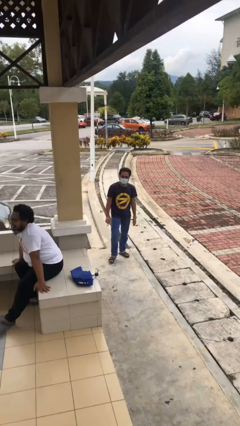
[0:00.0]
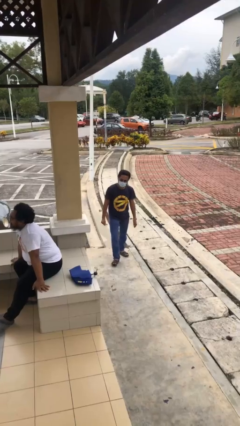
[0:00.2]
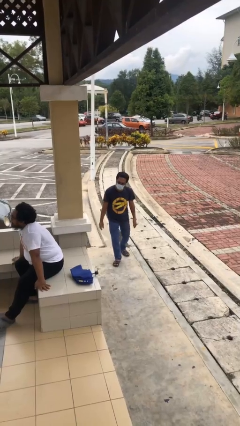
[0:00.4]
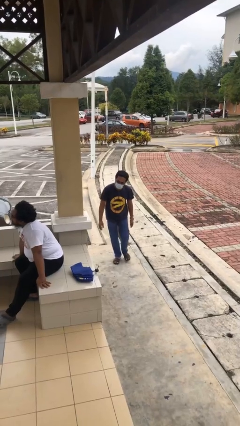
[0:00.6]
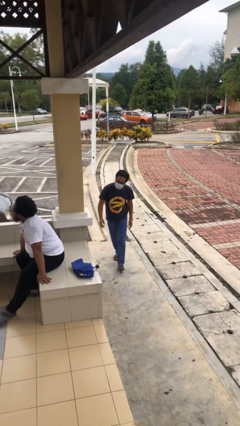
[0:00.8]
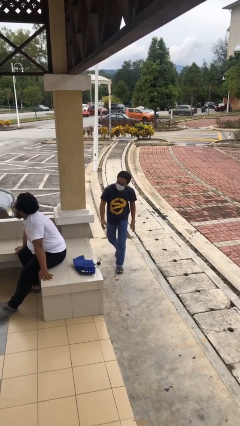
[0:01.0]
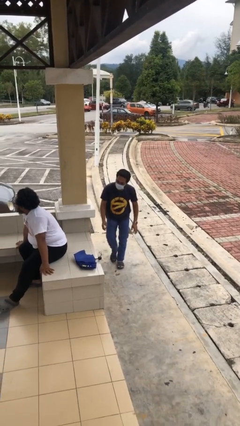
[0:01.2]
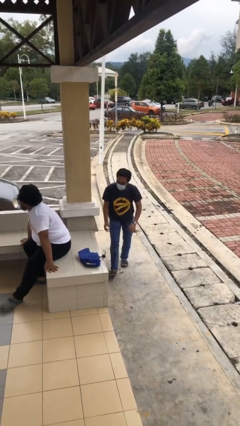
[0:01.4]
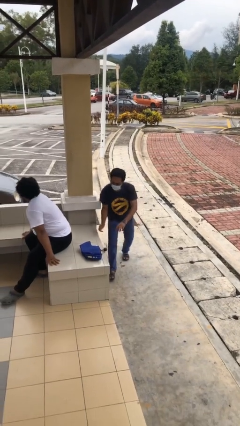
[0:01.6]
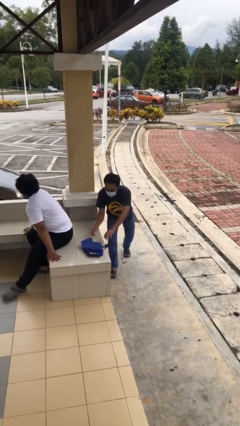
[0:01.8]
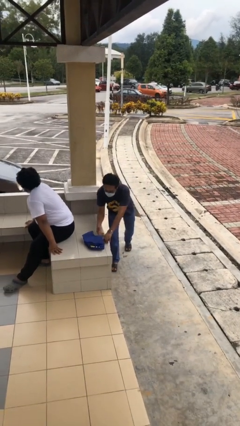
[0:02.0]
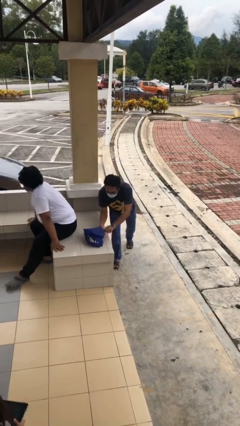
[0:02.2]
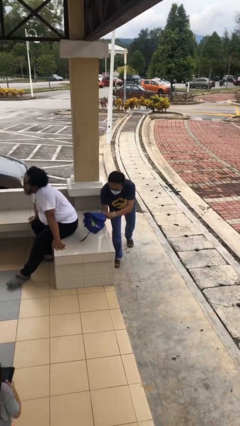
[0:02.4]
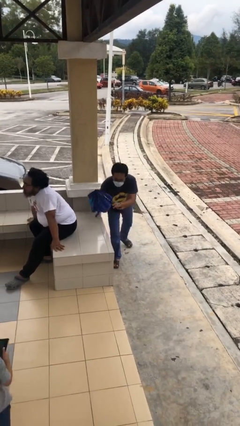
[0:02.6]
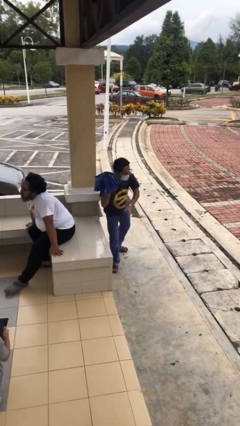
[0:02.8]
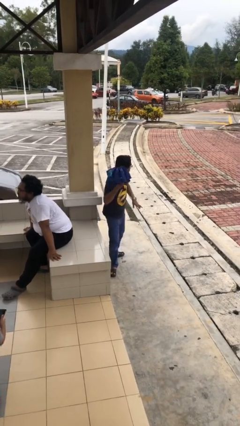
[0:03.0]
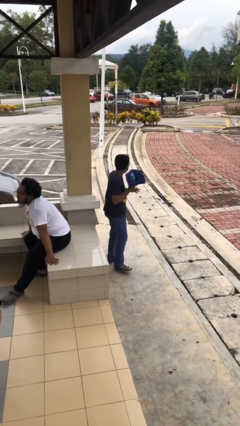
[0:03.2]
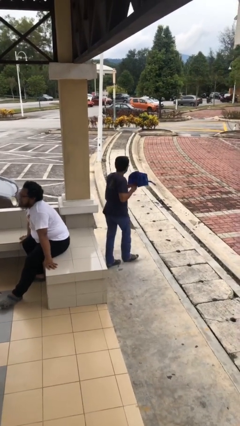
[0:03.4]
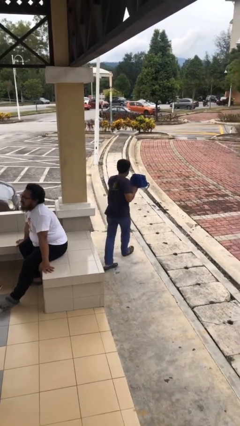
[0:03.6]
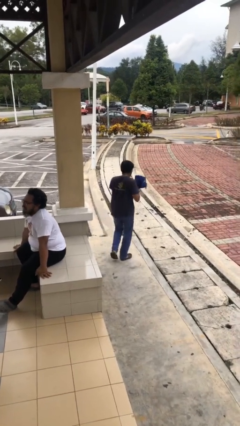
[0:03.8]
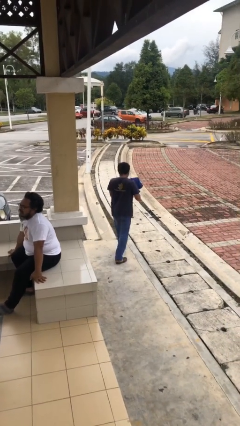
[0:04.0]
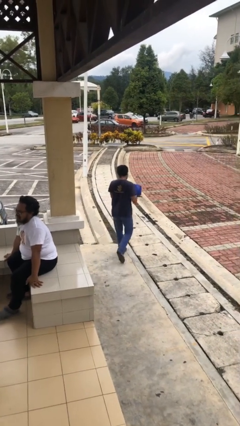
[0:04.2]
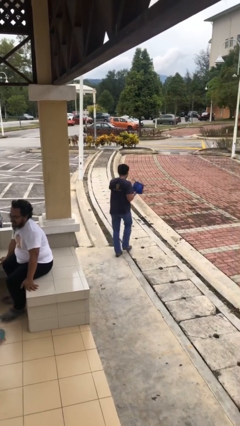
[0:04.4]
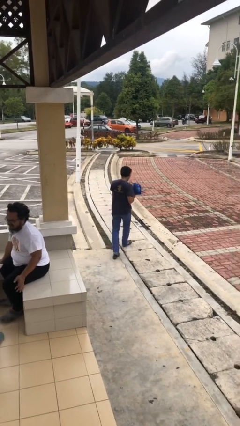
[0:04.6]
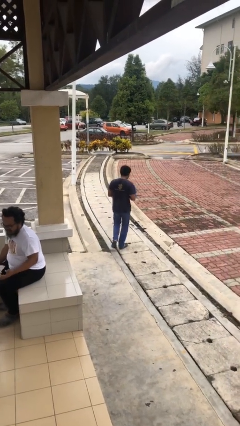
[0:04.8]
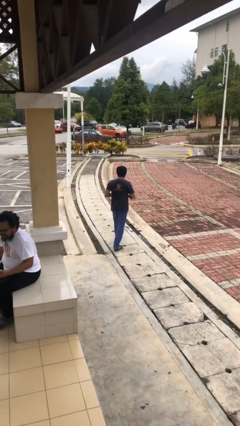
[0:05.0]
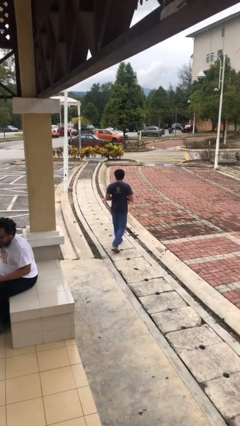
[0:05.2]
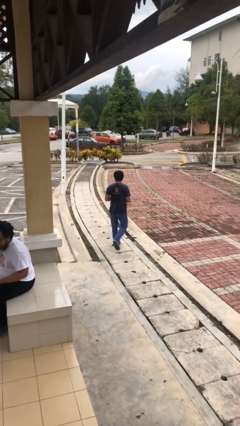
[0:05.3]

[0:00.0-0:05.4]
person steals object from person

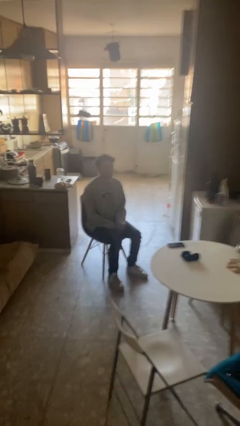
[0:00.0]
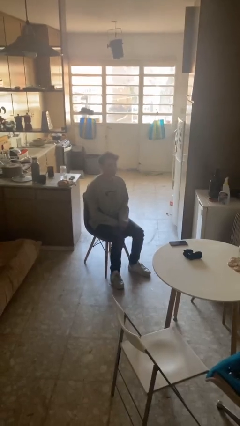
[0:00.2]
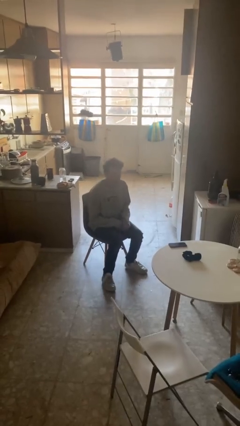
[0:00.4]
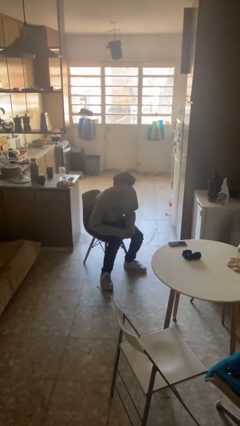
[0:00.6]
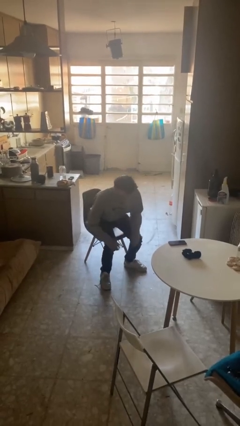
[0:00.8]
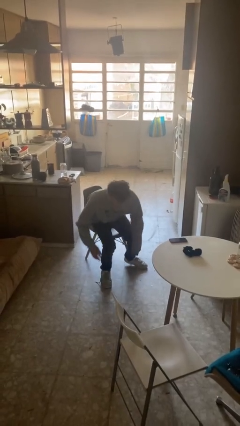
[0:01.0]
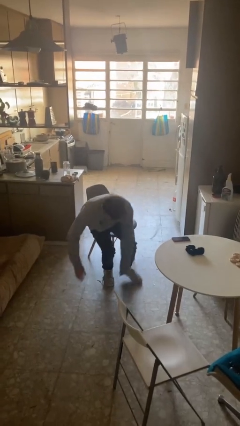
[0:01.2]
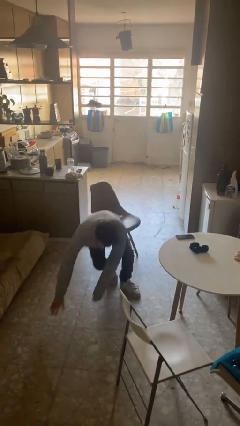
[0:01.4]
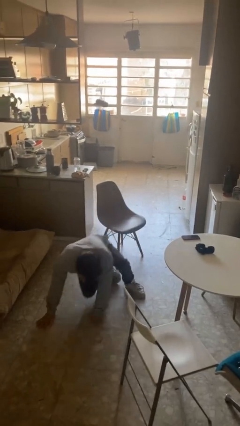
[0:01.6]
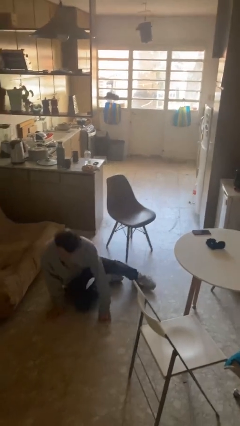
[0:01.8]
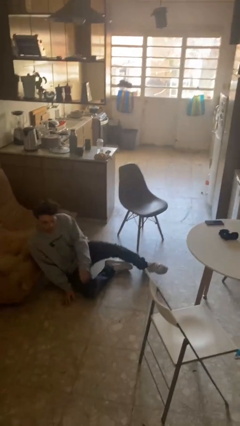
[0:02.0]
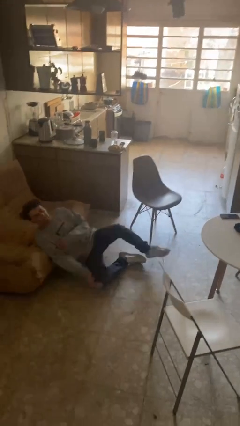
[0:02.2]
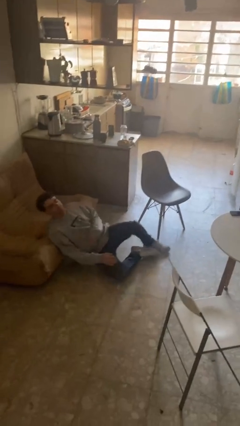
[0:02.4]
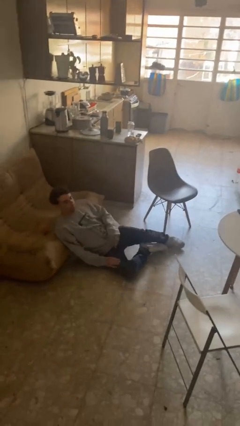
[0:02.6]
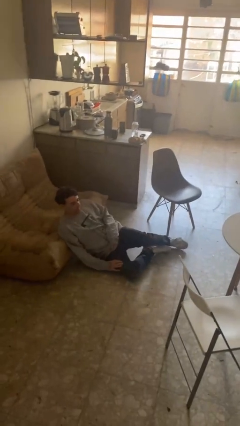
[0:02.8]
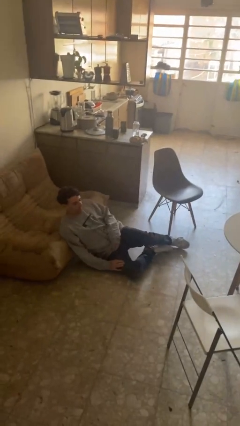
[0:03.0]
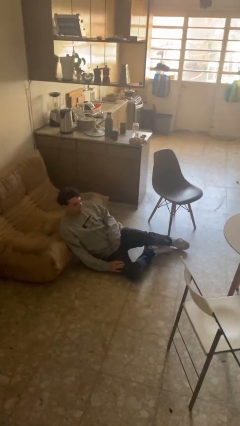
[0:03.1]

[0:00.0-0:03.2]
person falls from chair

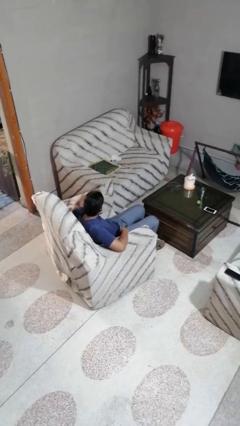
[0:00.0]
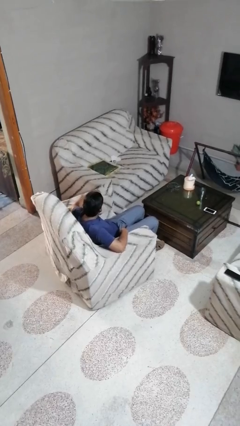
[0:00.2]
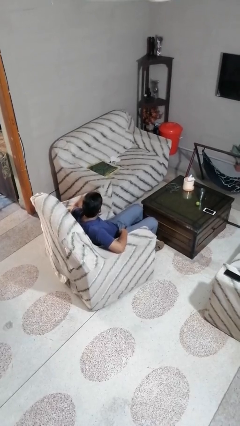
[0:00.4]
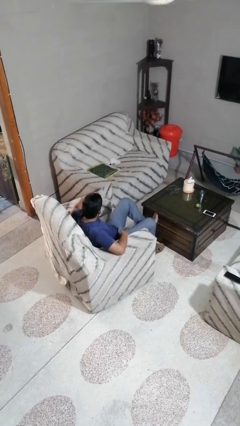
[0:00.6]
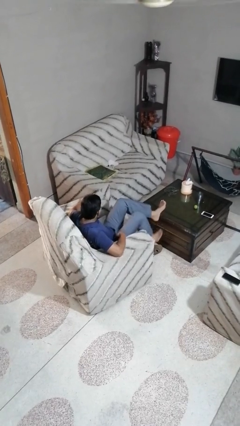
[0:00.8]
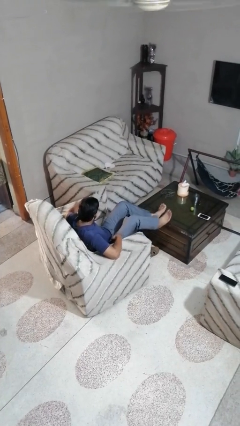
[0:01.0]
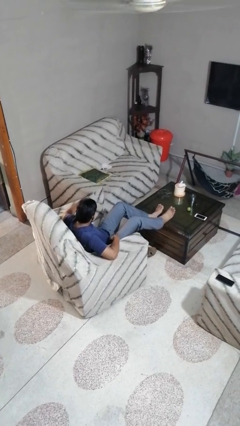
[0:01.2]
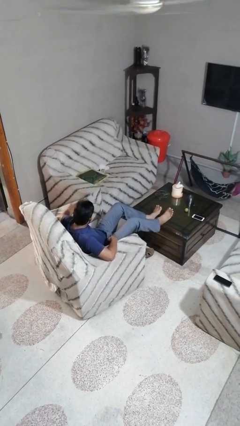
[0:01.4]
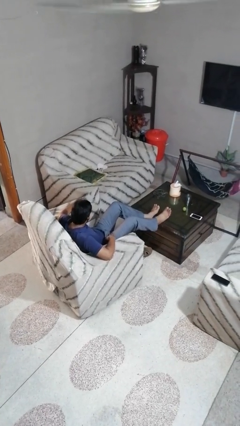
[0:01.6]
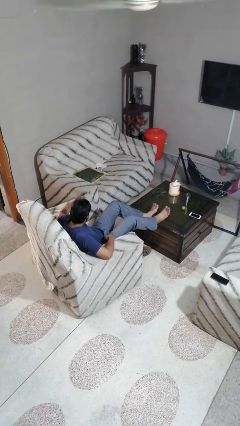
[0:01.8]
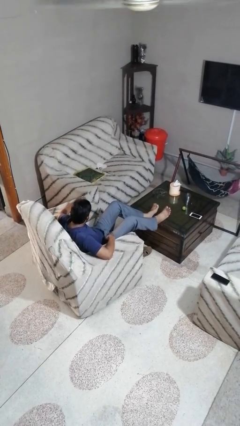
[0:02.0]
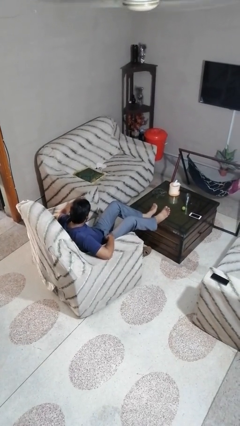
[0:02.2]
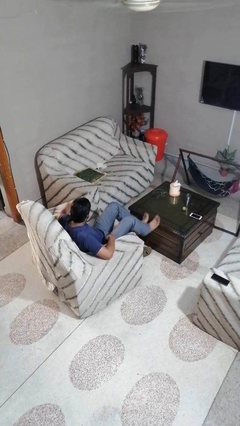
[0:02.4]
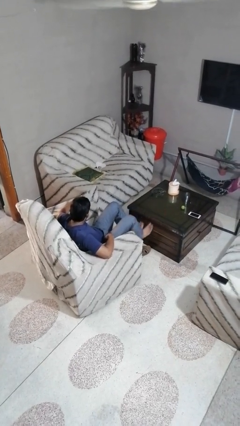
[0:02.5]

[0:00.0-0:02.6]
person puts feet up

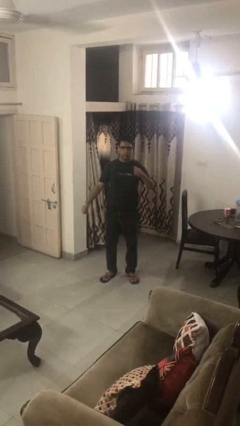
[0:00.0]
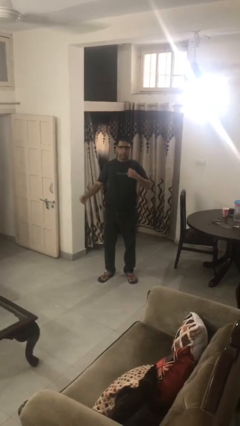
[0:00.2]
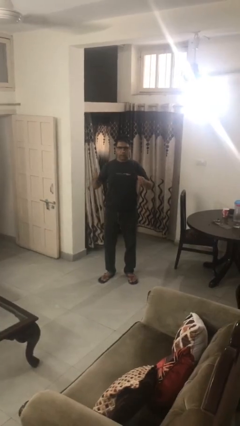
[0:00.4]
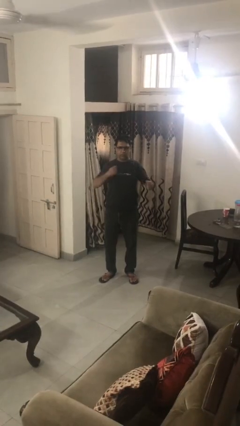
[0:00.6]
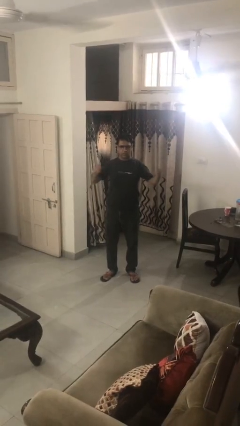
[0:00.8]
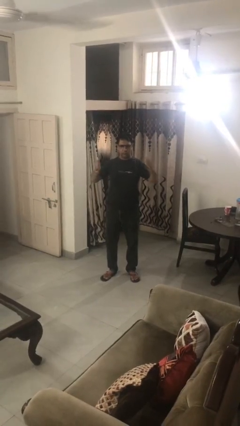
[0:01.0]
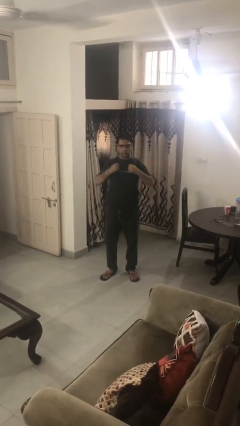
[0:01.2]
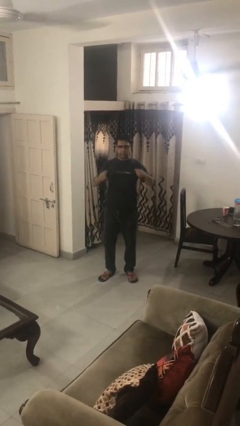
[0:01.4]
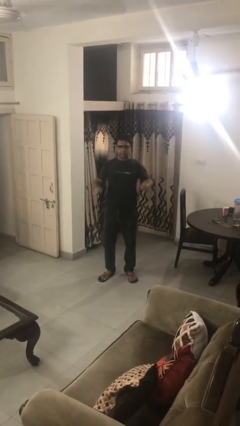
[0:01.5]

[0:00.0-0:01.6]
person drums on chest

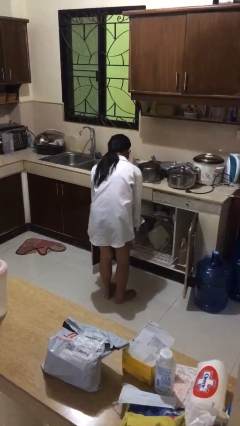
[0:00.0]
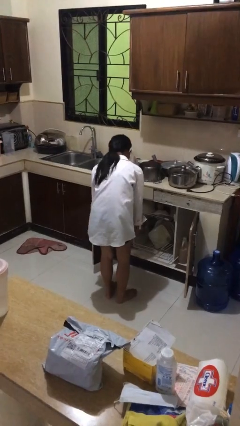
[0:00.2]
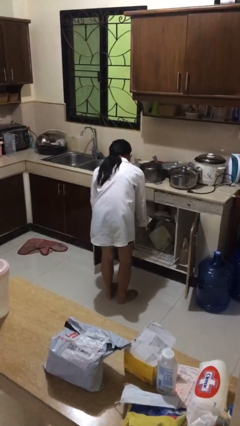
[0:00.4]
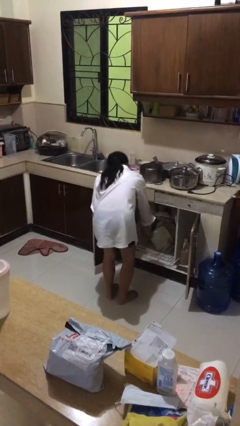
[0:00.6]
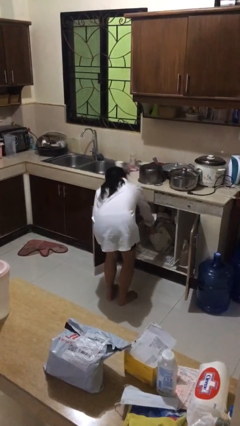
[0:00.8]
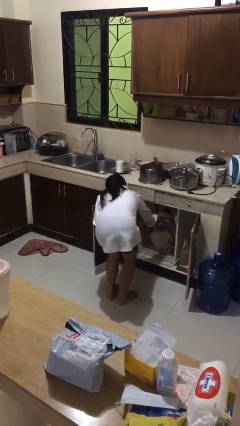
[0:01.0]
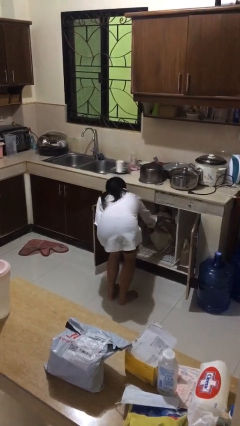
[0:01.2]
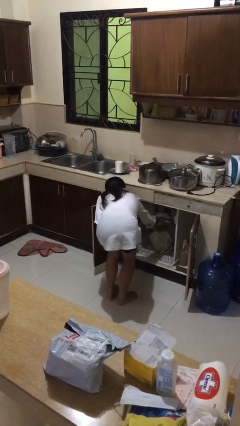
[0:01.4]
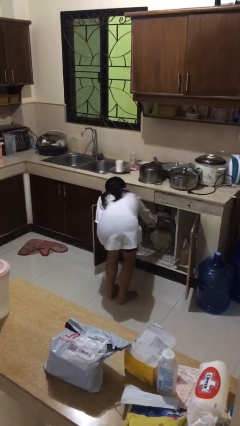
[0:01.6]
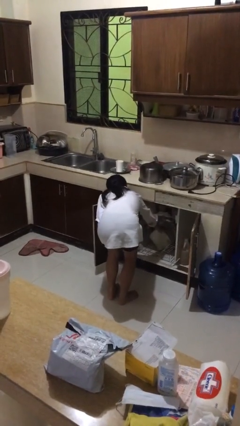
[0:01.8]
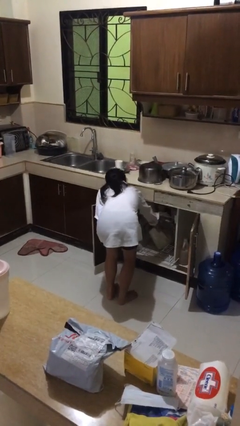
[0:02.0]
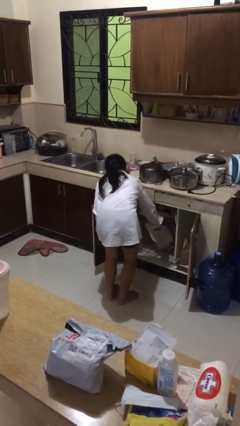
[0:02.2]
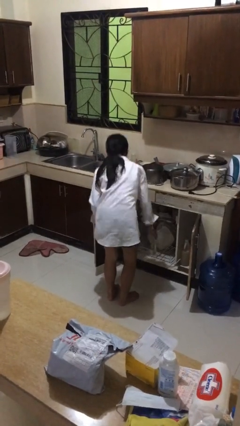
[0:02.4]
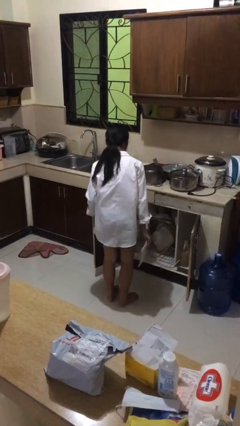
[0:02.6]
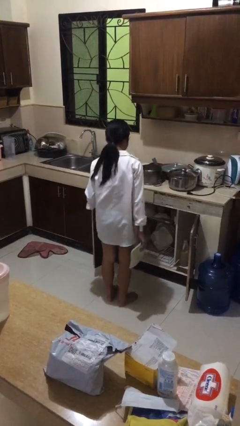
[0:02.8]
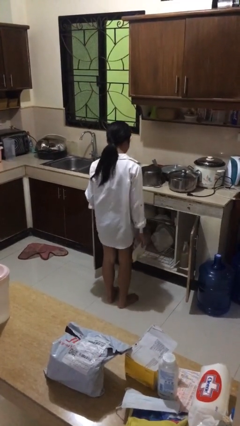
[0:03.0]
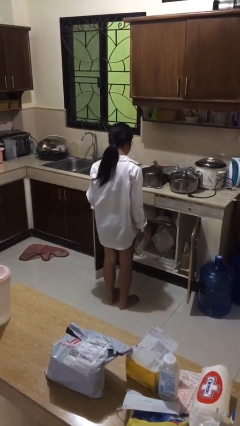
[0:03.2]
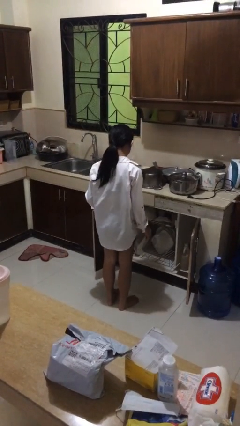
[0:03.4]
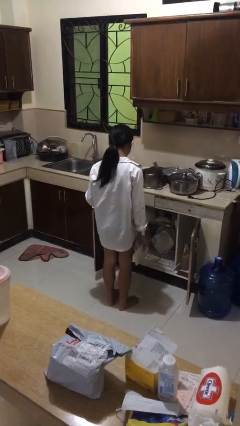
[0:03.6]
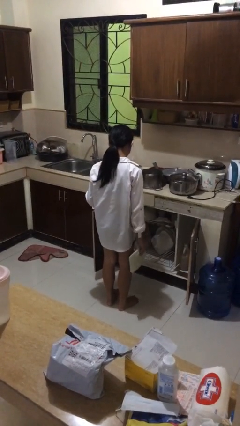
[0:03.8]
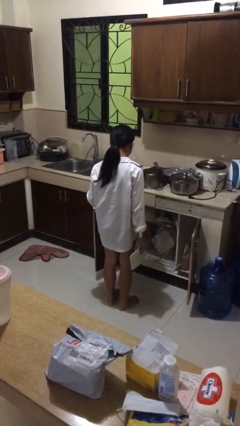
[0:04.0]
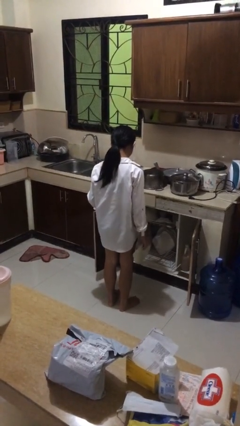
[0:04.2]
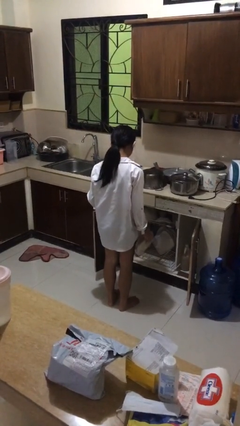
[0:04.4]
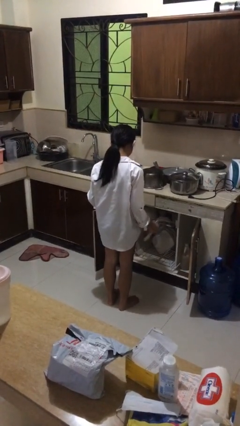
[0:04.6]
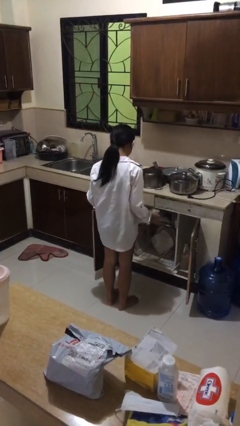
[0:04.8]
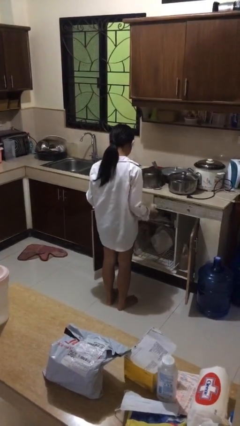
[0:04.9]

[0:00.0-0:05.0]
person unloads dishwasher

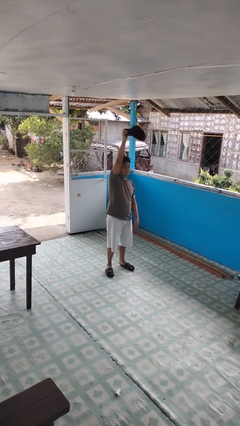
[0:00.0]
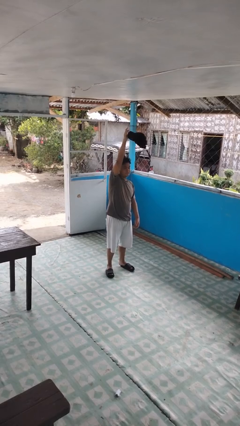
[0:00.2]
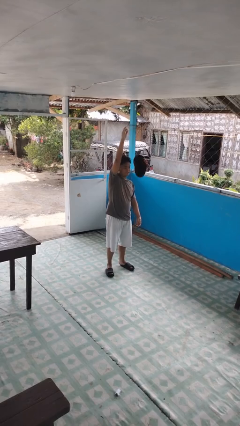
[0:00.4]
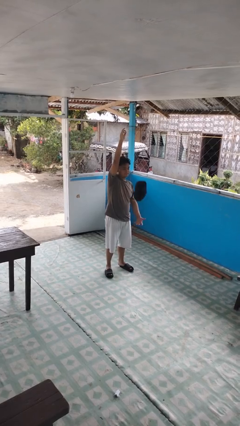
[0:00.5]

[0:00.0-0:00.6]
person drops object
